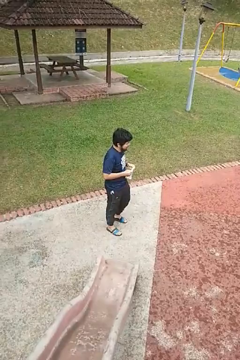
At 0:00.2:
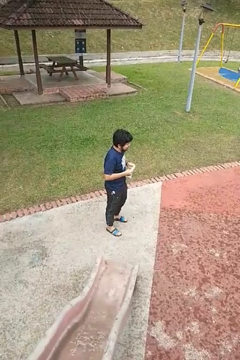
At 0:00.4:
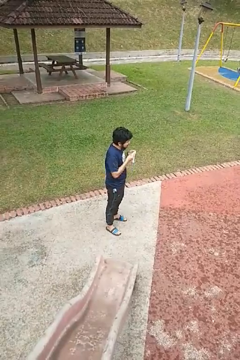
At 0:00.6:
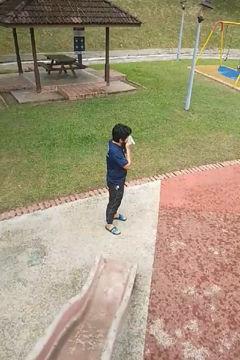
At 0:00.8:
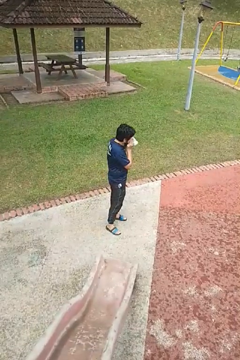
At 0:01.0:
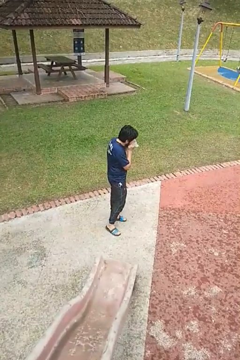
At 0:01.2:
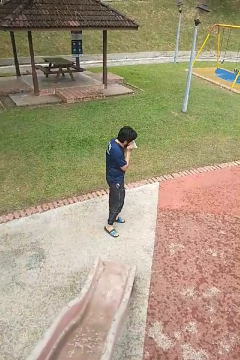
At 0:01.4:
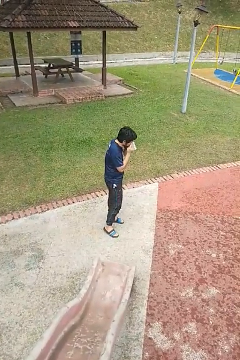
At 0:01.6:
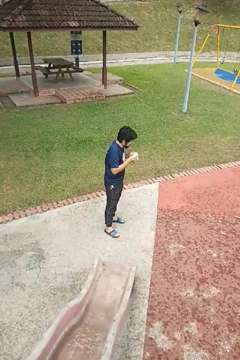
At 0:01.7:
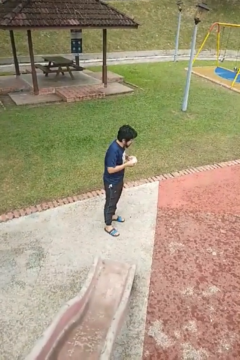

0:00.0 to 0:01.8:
person blows nose

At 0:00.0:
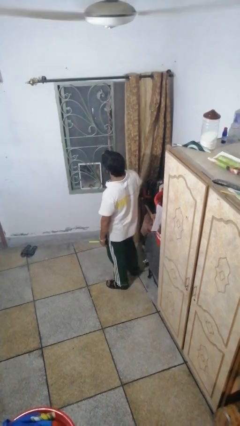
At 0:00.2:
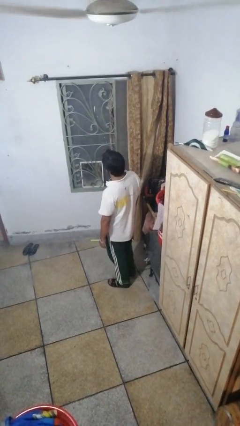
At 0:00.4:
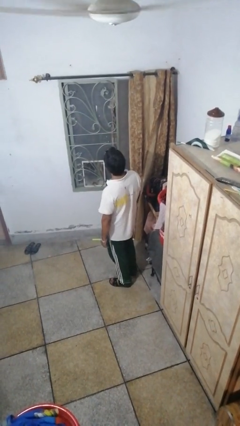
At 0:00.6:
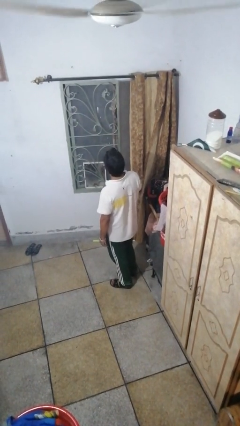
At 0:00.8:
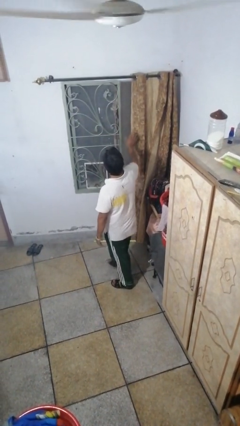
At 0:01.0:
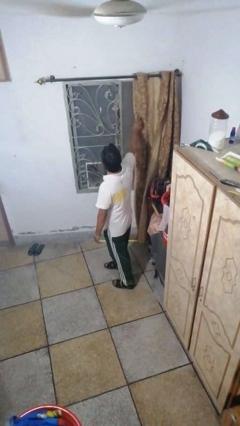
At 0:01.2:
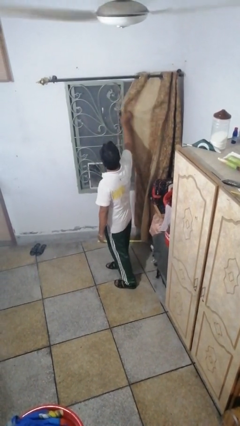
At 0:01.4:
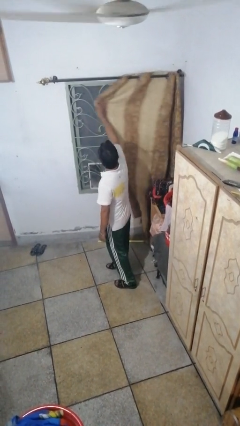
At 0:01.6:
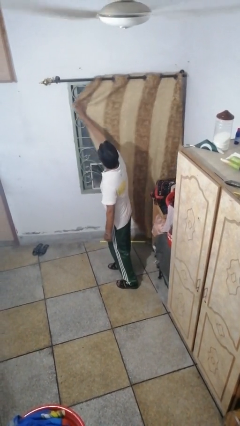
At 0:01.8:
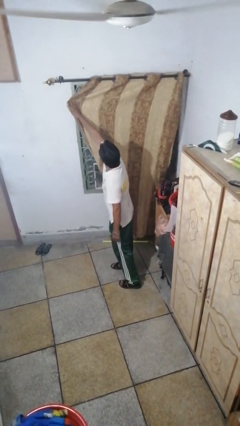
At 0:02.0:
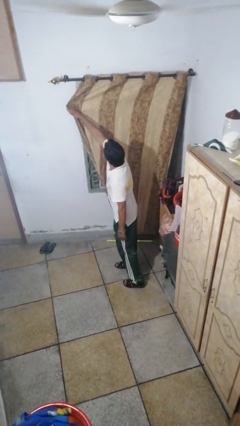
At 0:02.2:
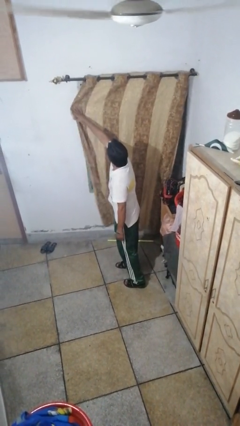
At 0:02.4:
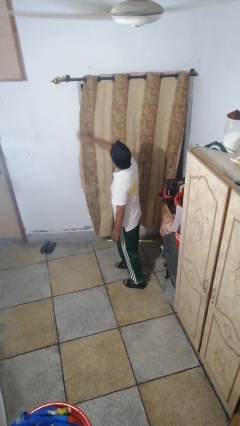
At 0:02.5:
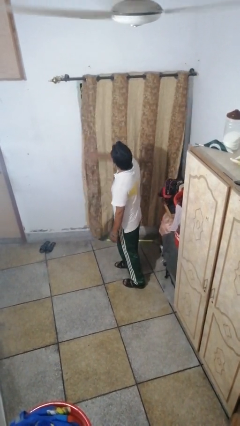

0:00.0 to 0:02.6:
person closes curtains

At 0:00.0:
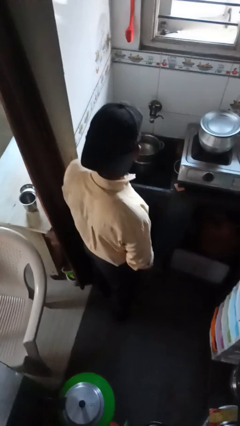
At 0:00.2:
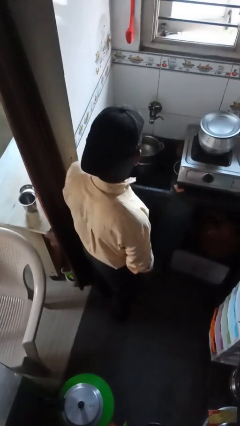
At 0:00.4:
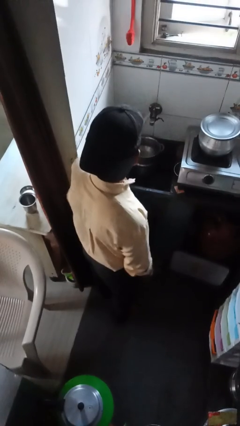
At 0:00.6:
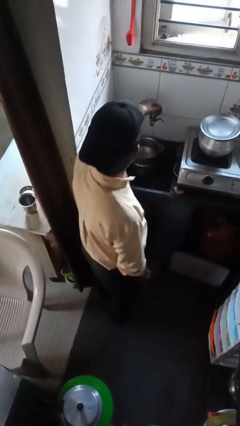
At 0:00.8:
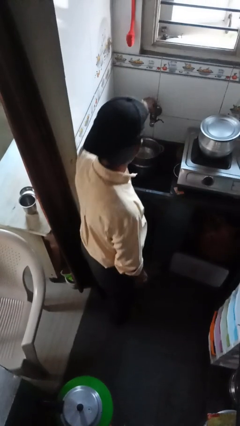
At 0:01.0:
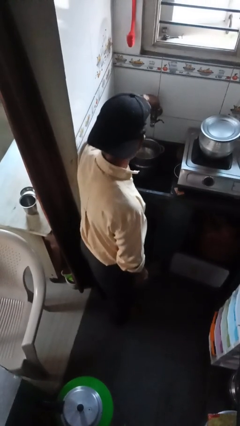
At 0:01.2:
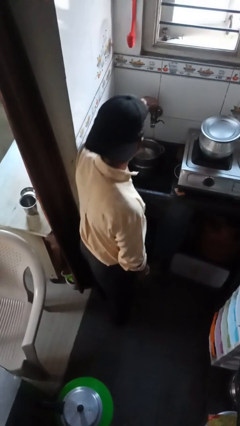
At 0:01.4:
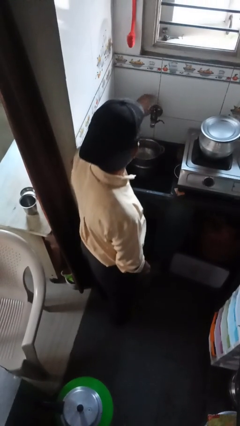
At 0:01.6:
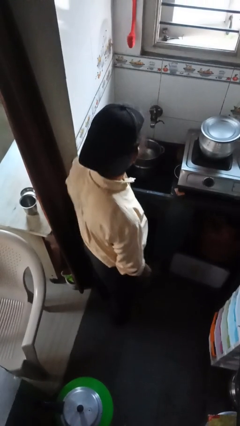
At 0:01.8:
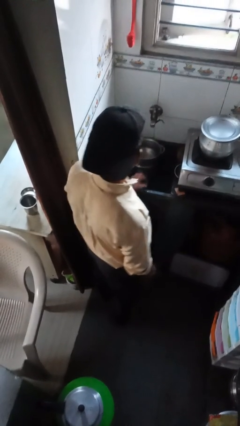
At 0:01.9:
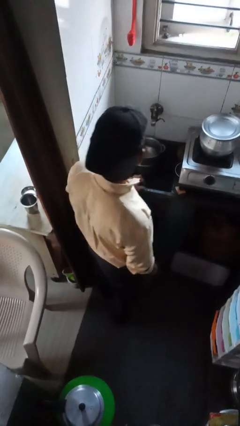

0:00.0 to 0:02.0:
person turns off faucet

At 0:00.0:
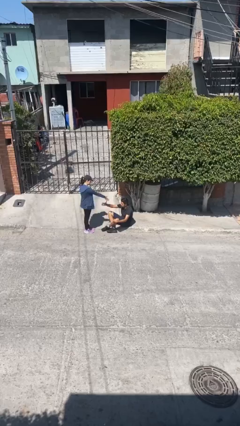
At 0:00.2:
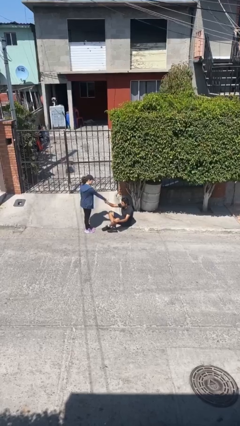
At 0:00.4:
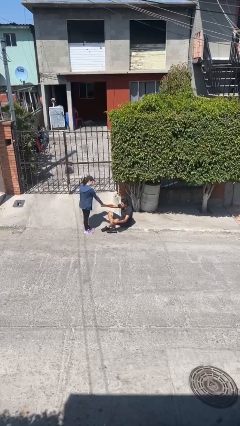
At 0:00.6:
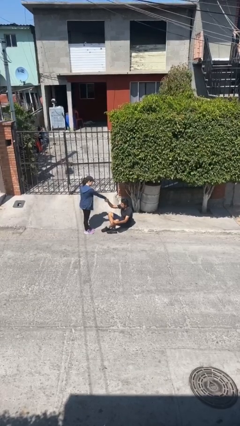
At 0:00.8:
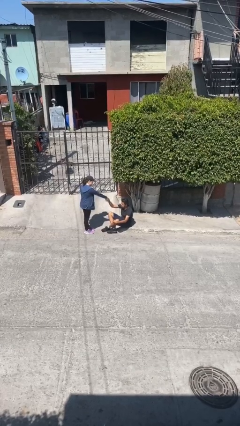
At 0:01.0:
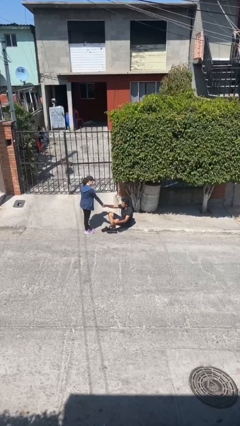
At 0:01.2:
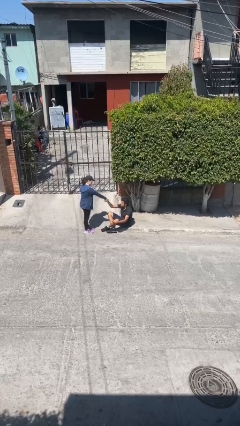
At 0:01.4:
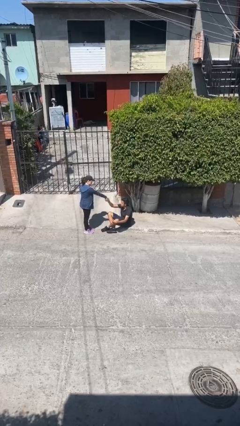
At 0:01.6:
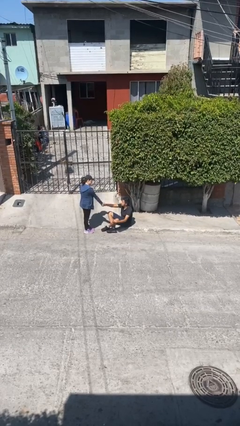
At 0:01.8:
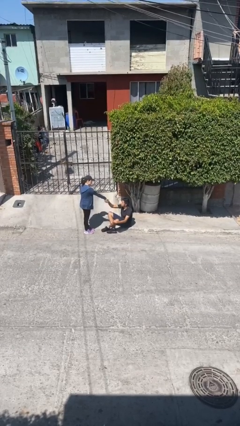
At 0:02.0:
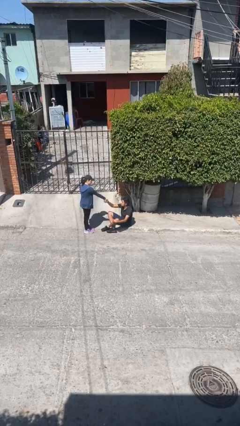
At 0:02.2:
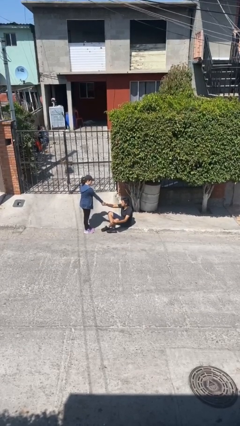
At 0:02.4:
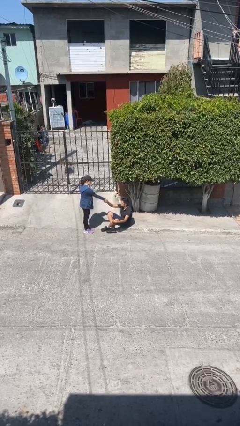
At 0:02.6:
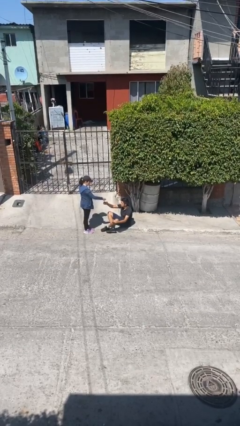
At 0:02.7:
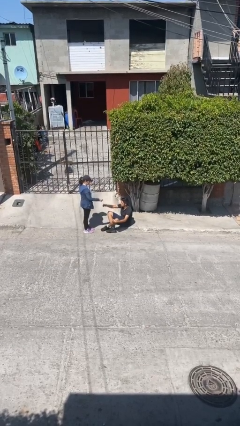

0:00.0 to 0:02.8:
person shakes hand

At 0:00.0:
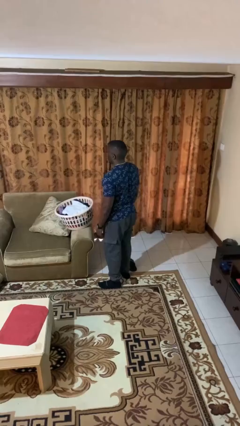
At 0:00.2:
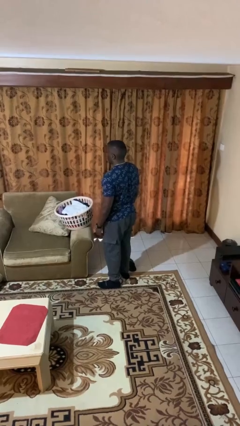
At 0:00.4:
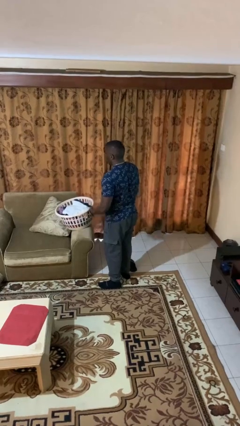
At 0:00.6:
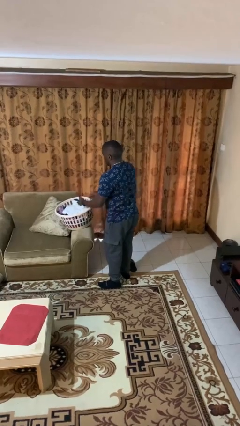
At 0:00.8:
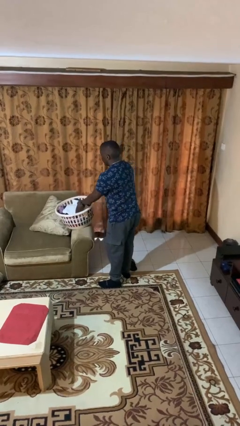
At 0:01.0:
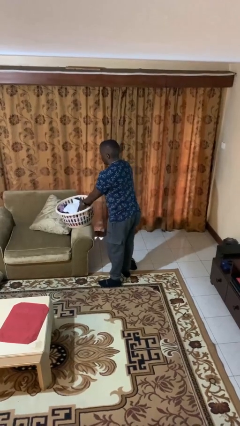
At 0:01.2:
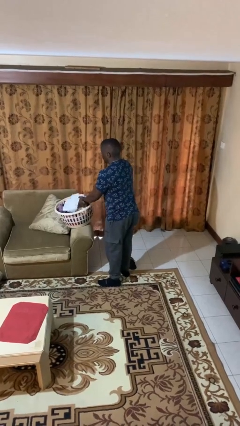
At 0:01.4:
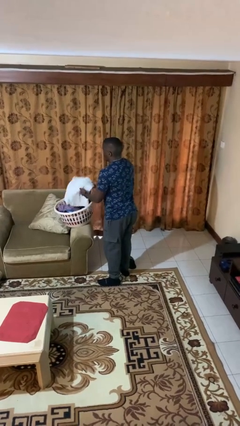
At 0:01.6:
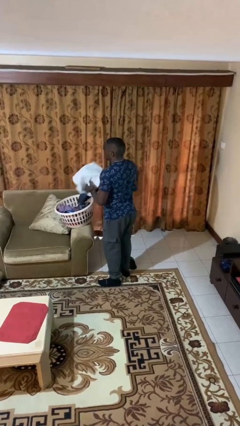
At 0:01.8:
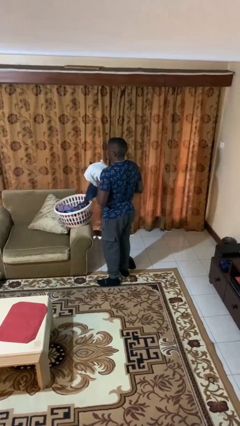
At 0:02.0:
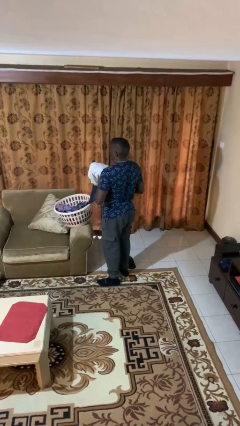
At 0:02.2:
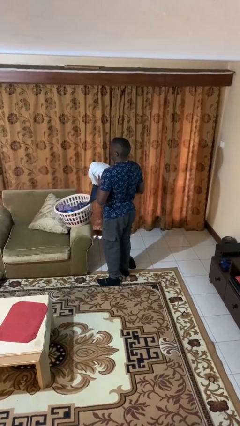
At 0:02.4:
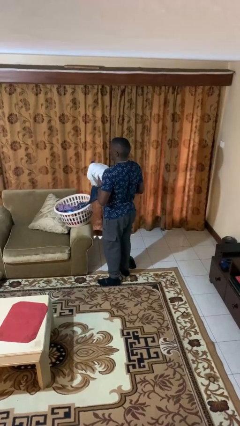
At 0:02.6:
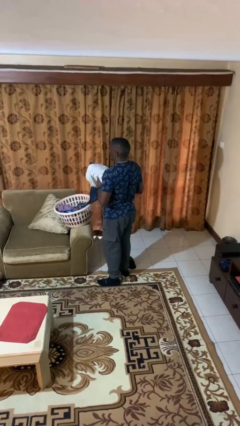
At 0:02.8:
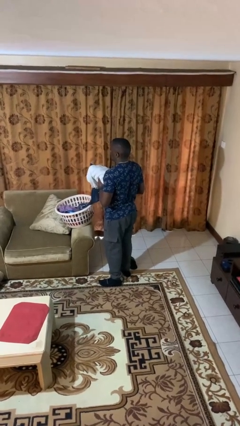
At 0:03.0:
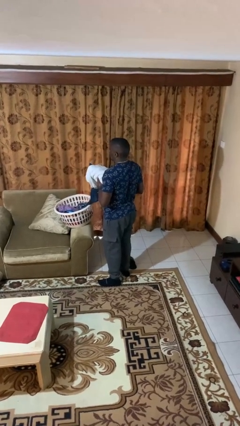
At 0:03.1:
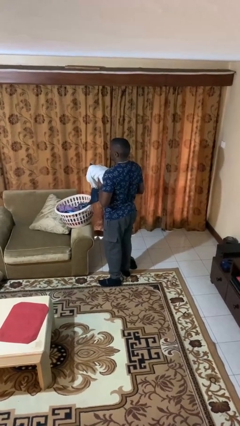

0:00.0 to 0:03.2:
person takes object from basket

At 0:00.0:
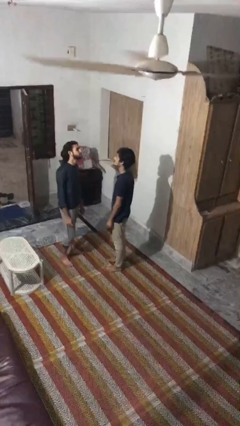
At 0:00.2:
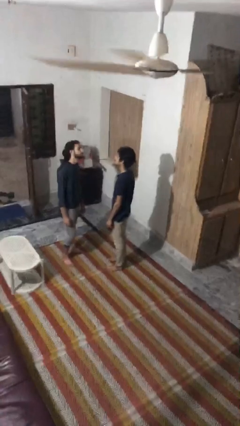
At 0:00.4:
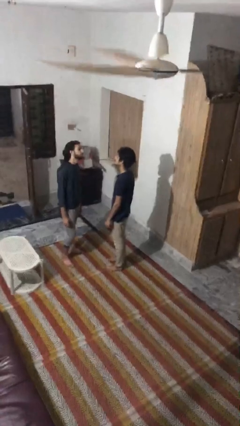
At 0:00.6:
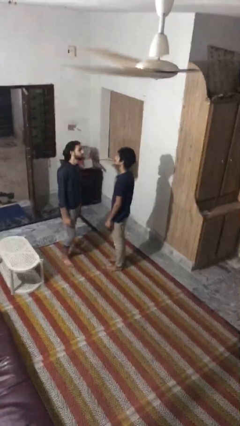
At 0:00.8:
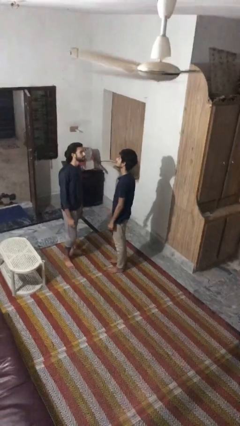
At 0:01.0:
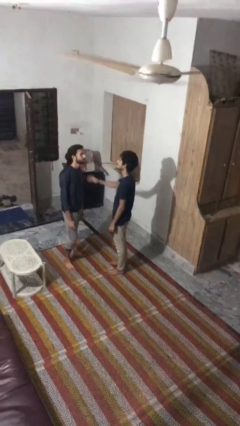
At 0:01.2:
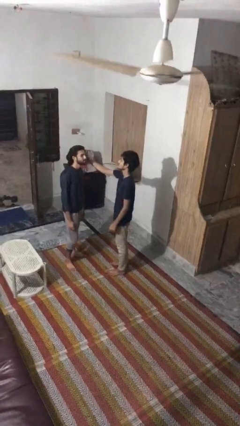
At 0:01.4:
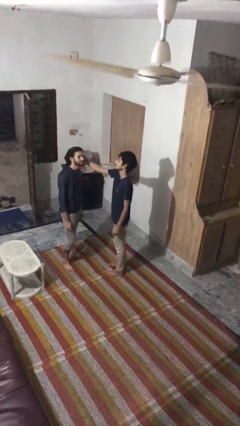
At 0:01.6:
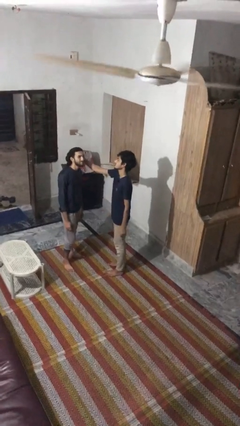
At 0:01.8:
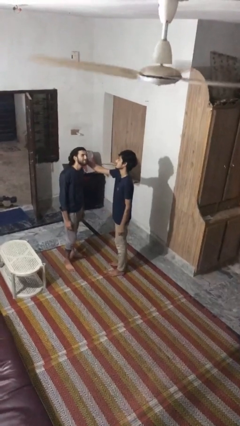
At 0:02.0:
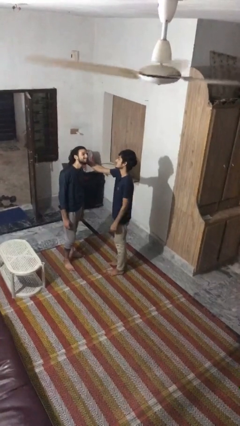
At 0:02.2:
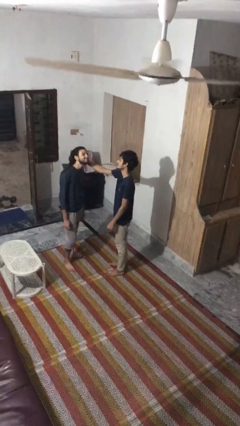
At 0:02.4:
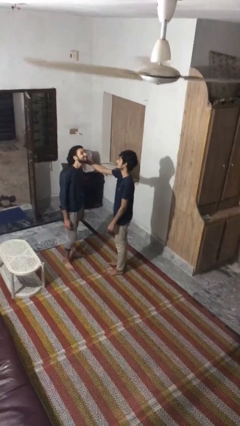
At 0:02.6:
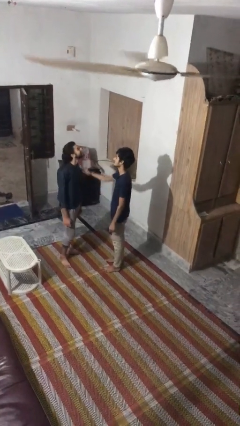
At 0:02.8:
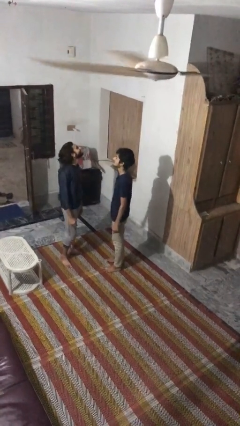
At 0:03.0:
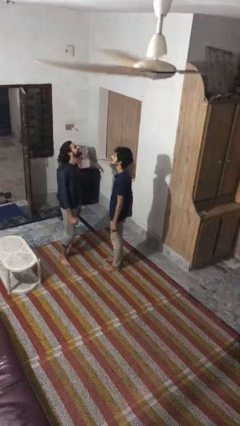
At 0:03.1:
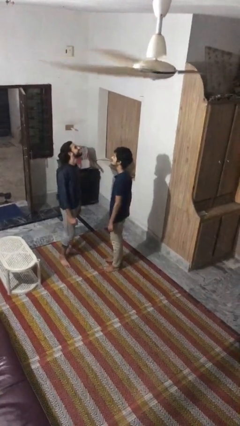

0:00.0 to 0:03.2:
person grabs person by hair

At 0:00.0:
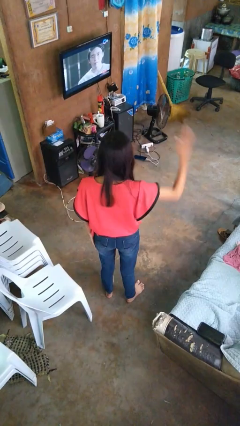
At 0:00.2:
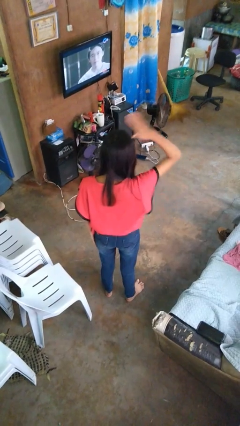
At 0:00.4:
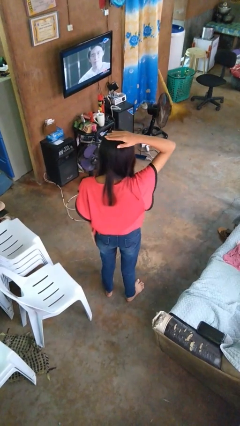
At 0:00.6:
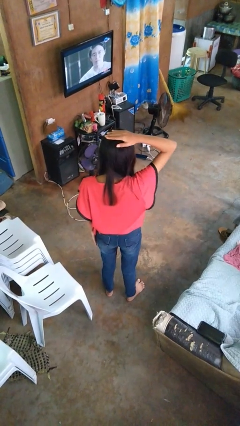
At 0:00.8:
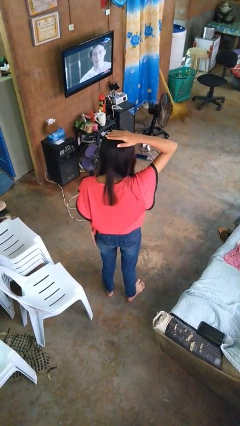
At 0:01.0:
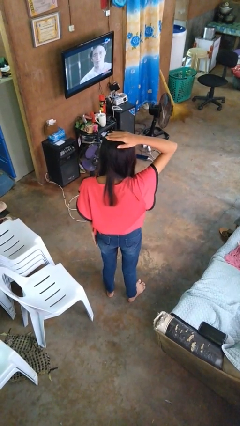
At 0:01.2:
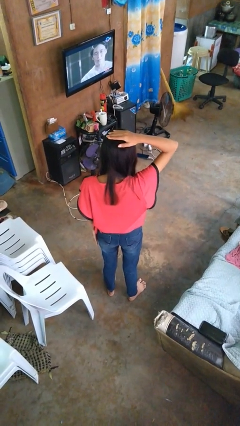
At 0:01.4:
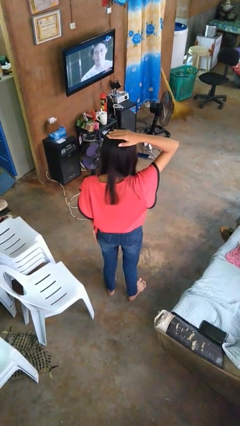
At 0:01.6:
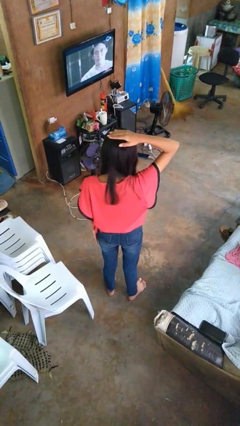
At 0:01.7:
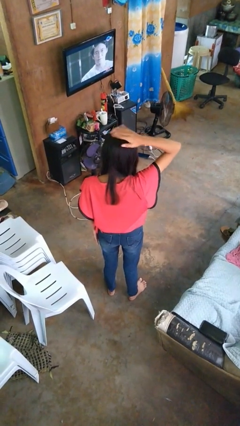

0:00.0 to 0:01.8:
person pats head
